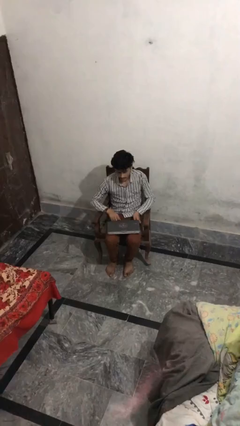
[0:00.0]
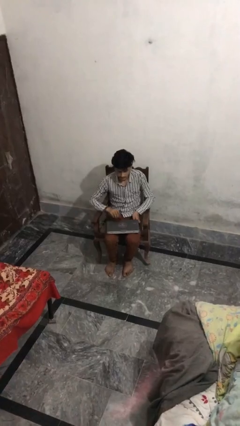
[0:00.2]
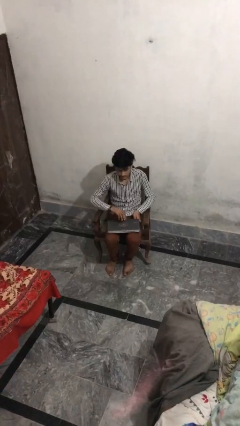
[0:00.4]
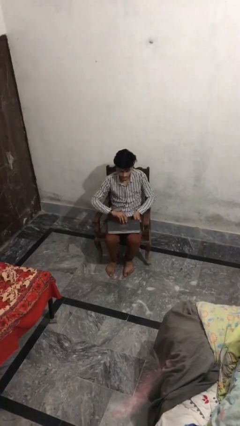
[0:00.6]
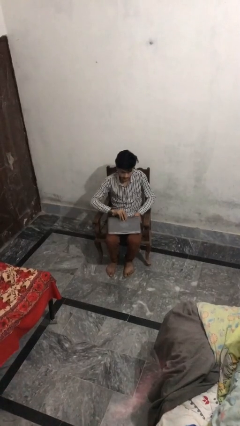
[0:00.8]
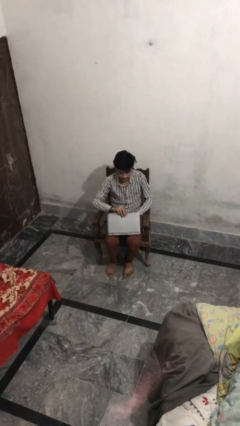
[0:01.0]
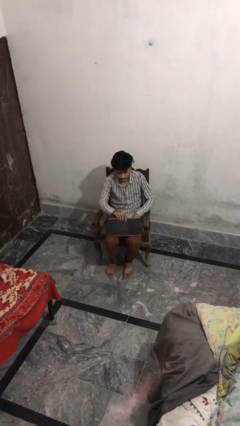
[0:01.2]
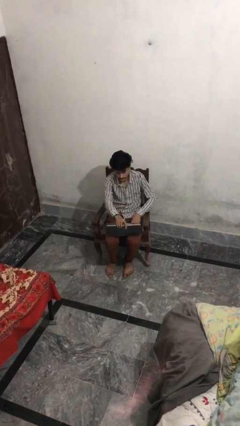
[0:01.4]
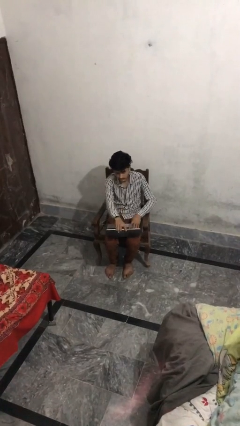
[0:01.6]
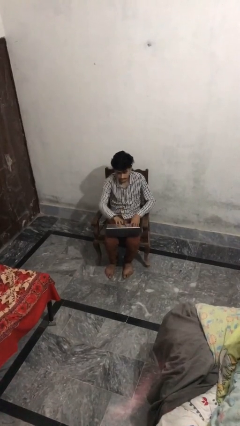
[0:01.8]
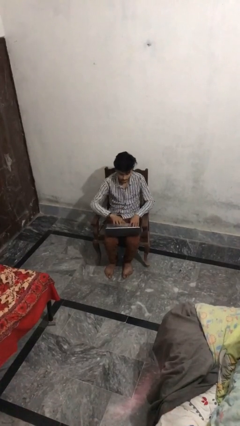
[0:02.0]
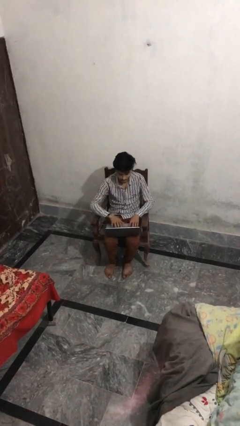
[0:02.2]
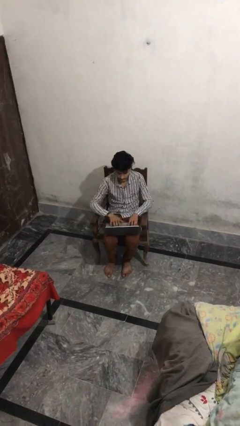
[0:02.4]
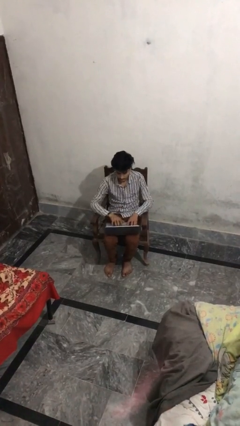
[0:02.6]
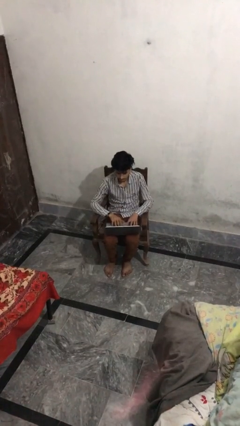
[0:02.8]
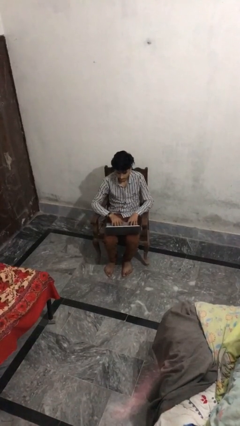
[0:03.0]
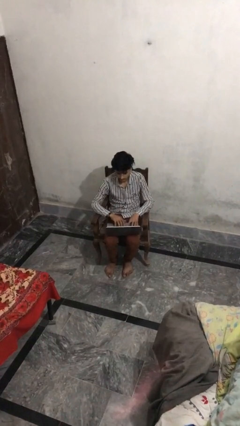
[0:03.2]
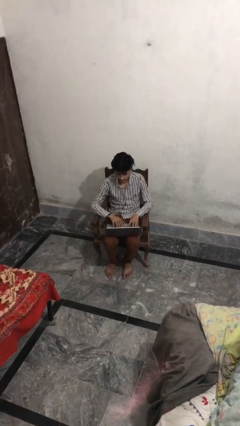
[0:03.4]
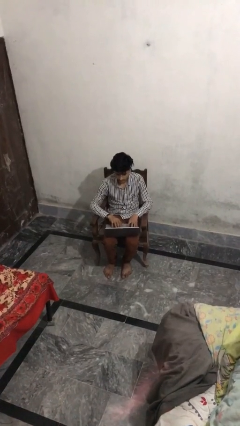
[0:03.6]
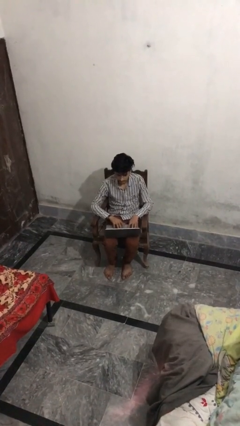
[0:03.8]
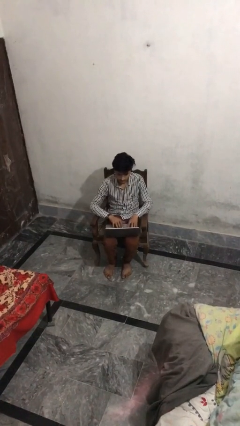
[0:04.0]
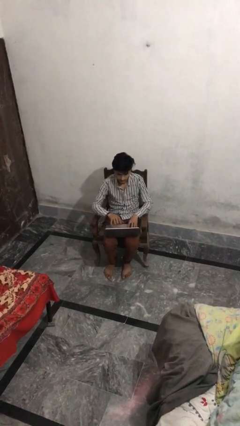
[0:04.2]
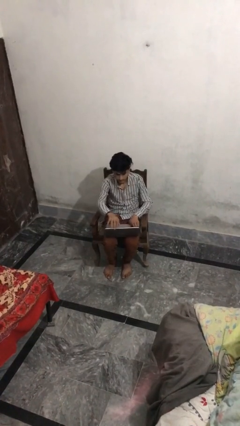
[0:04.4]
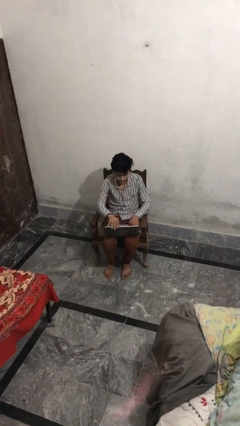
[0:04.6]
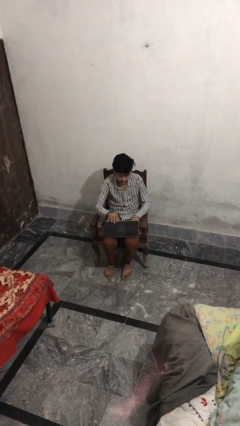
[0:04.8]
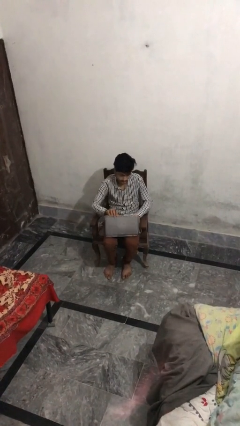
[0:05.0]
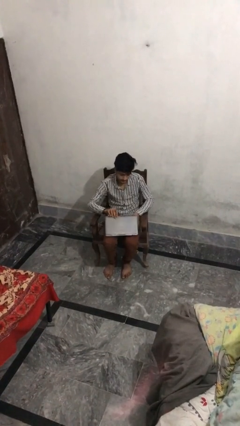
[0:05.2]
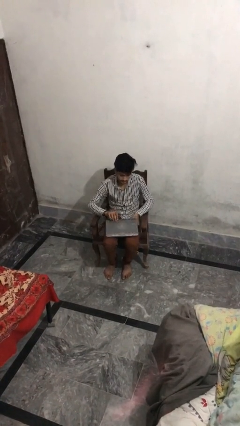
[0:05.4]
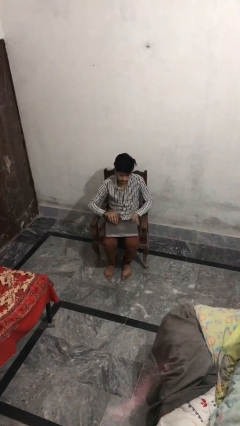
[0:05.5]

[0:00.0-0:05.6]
person interacts with laptop

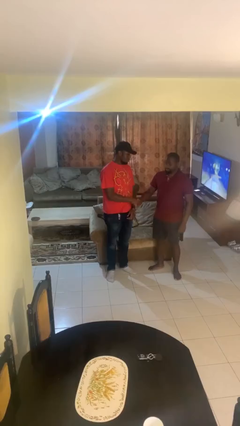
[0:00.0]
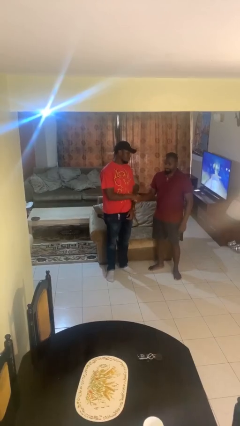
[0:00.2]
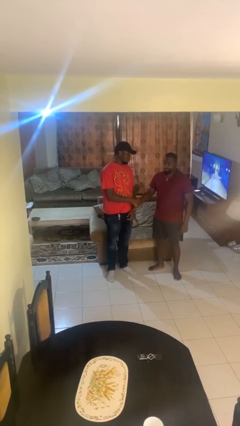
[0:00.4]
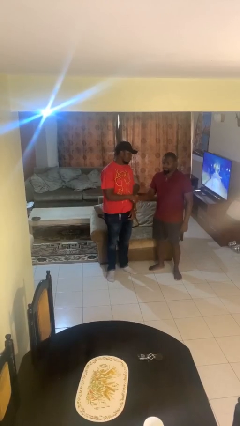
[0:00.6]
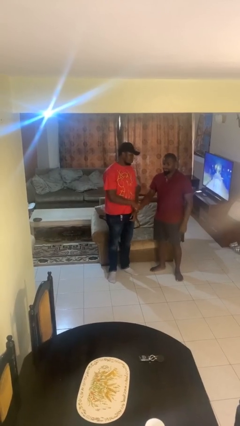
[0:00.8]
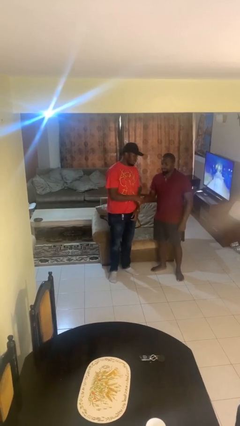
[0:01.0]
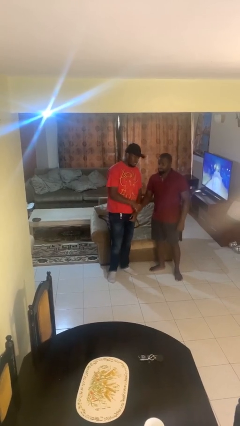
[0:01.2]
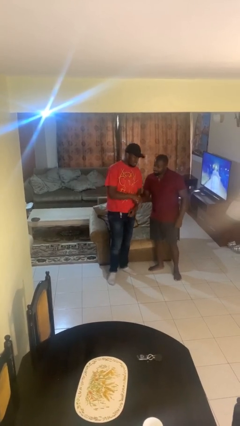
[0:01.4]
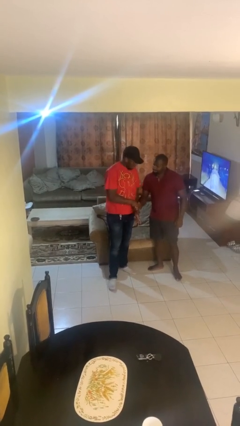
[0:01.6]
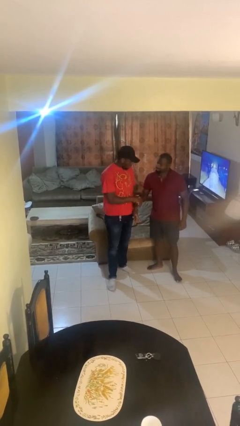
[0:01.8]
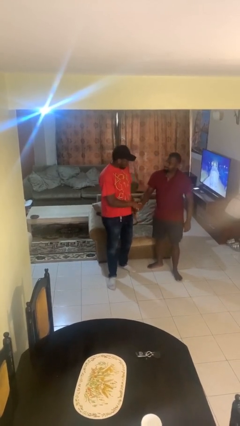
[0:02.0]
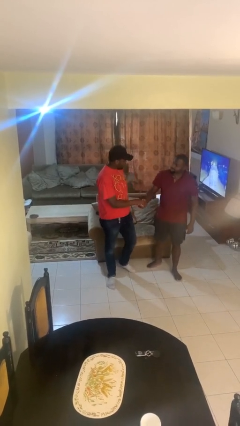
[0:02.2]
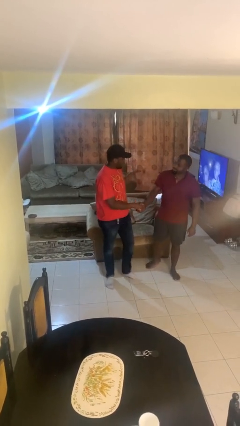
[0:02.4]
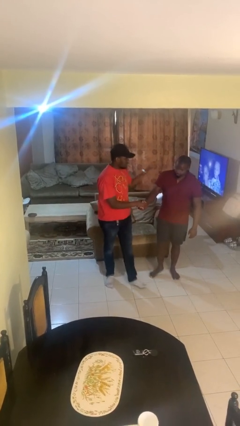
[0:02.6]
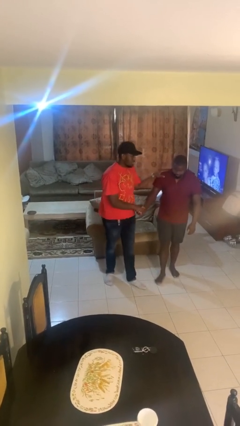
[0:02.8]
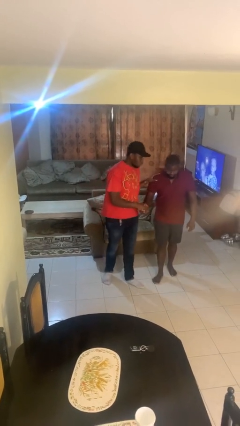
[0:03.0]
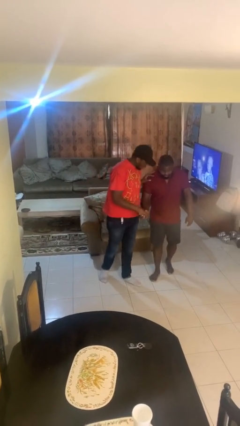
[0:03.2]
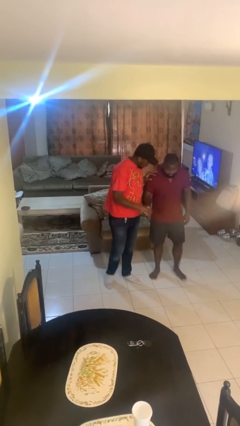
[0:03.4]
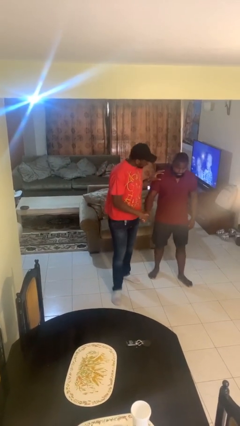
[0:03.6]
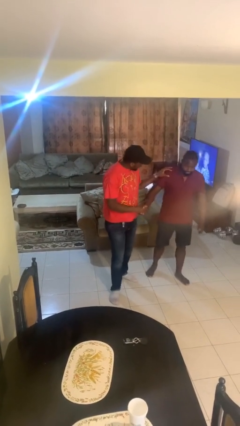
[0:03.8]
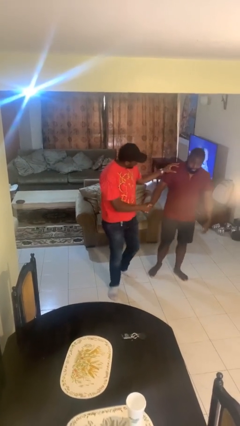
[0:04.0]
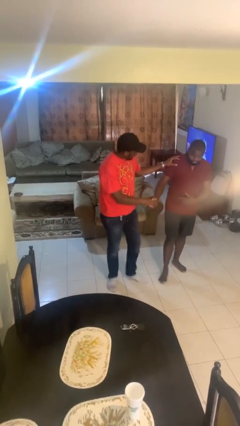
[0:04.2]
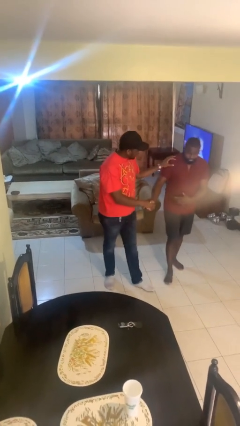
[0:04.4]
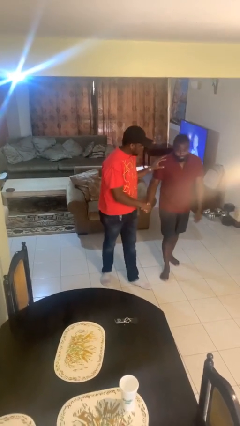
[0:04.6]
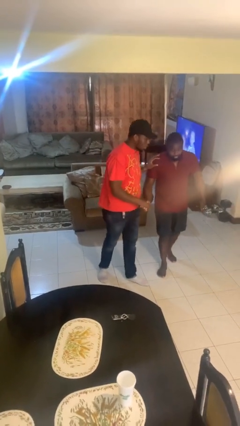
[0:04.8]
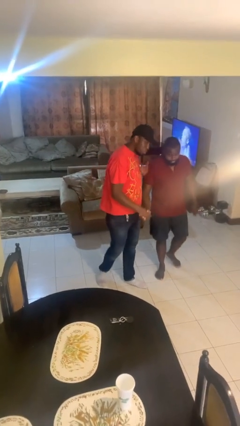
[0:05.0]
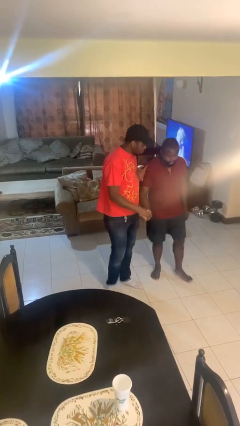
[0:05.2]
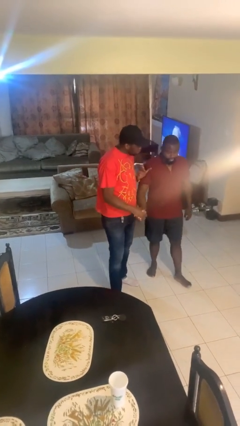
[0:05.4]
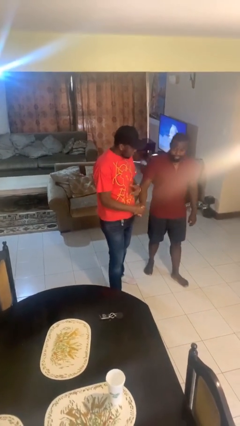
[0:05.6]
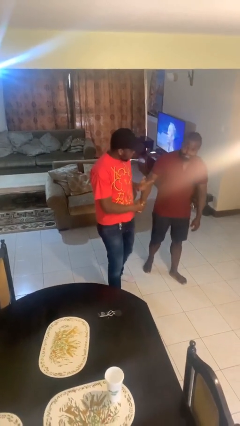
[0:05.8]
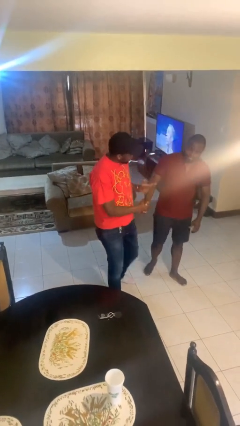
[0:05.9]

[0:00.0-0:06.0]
person holds hand

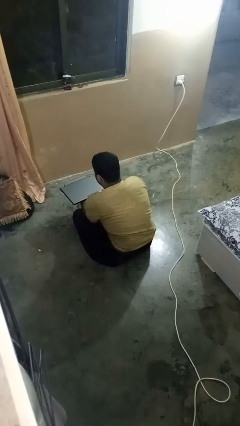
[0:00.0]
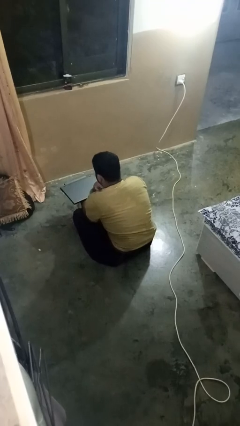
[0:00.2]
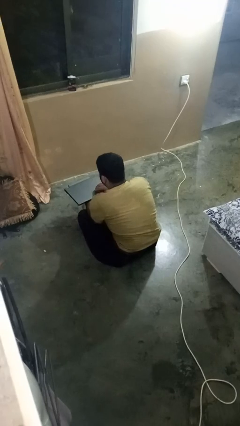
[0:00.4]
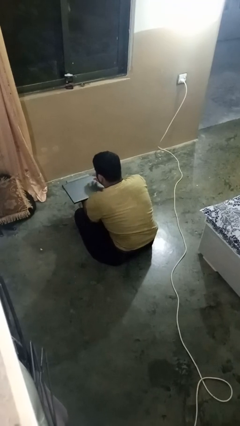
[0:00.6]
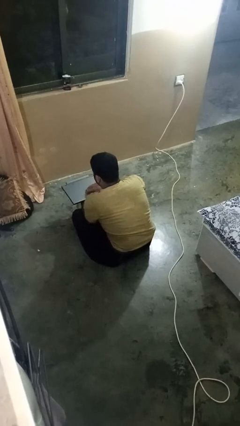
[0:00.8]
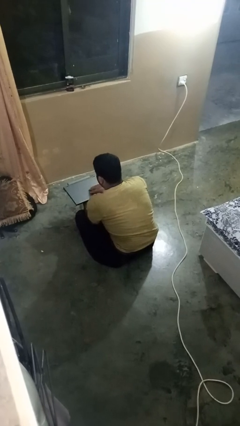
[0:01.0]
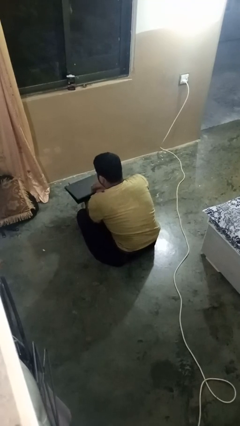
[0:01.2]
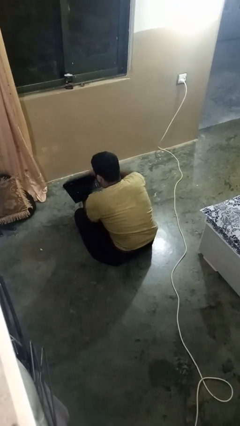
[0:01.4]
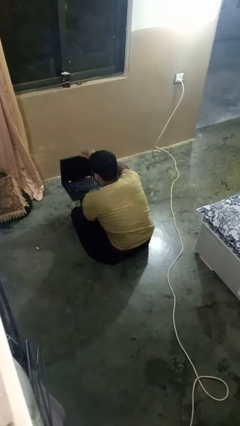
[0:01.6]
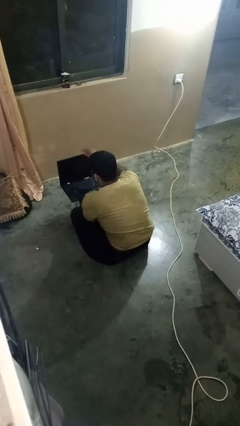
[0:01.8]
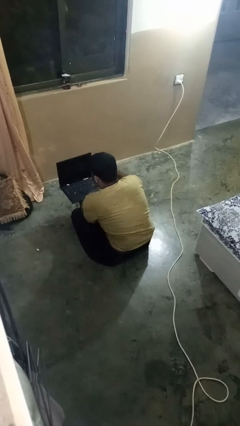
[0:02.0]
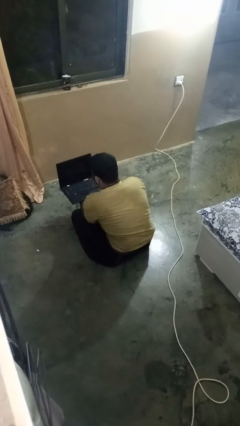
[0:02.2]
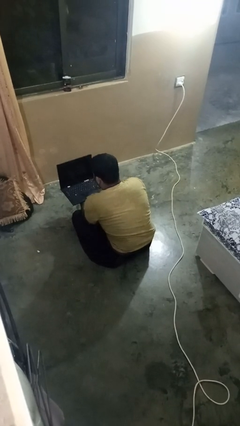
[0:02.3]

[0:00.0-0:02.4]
person opens laptop

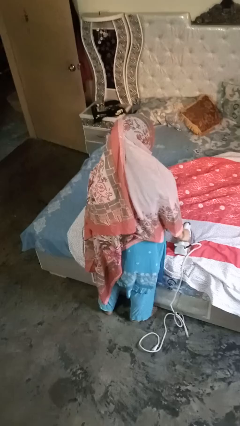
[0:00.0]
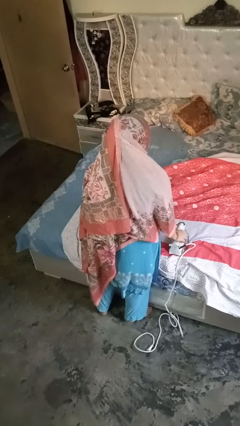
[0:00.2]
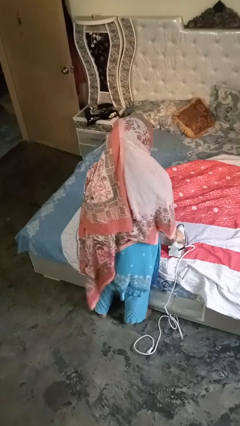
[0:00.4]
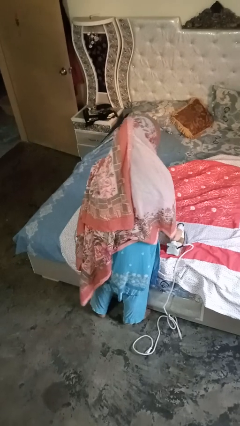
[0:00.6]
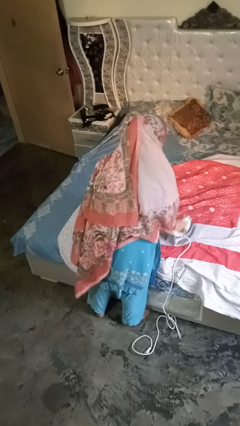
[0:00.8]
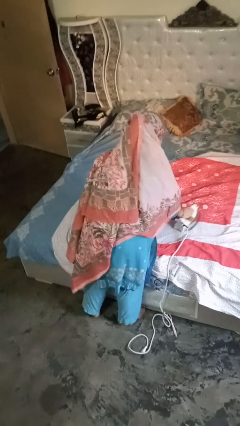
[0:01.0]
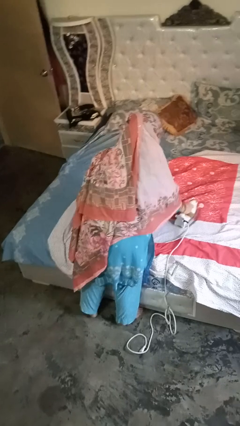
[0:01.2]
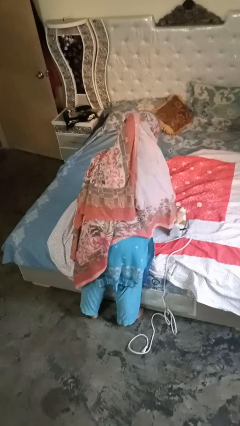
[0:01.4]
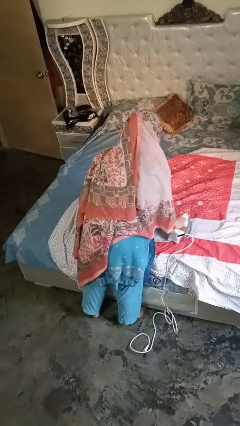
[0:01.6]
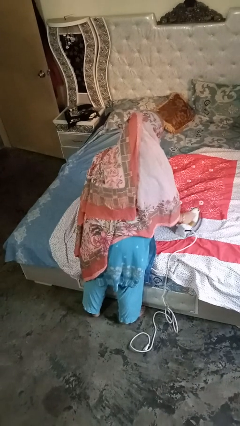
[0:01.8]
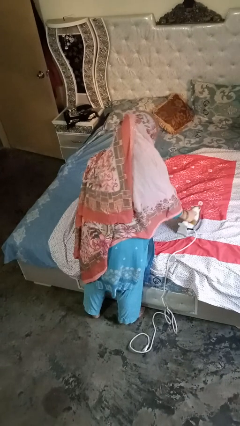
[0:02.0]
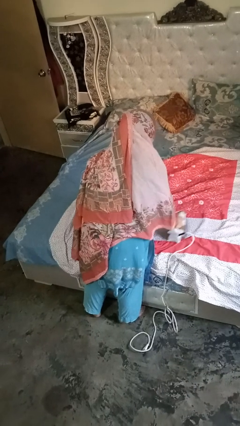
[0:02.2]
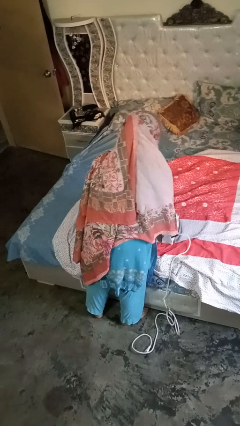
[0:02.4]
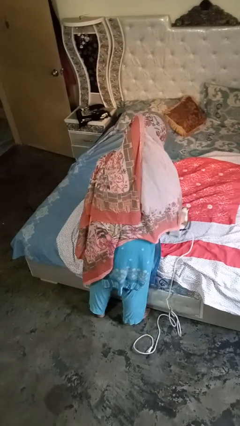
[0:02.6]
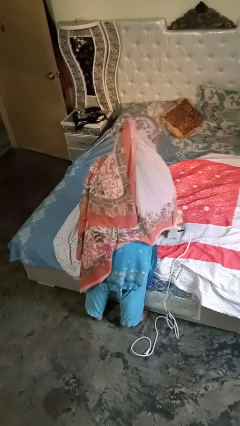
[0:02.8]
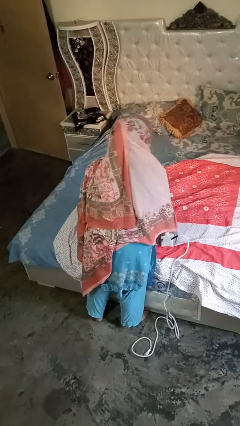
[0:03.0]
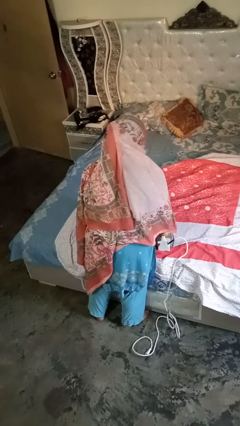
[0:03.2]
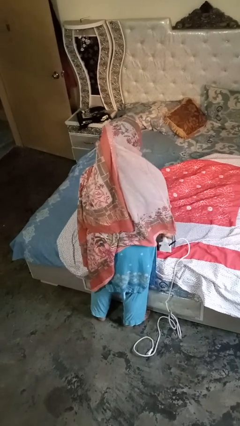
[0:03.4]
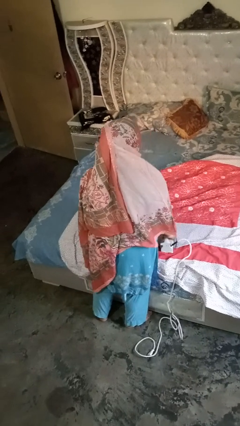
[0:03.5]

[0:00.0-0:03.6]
person irons clothes

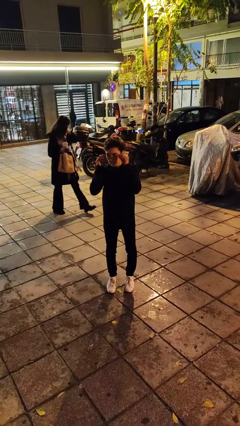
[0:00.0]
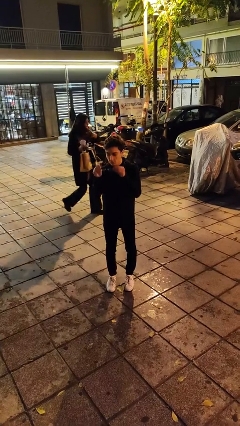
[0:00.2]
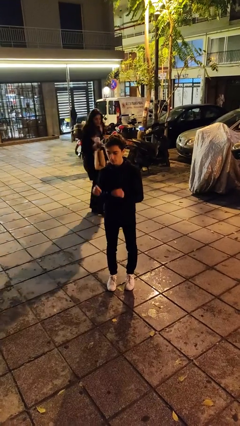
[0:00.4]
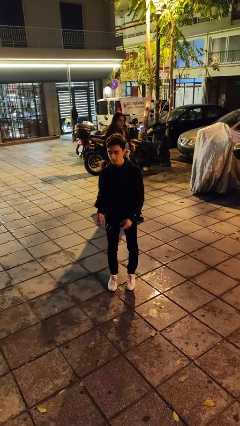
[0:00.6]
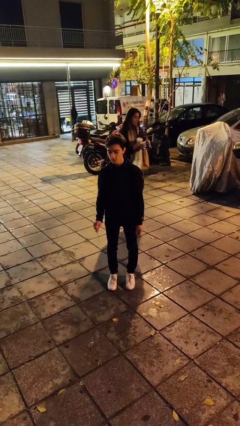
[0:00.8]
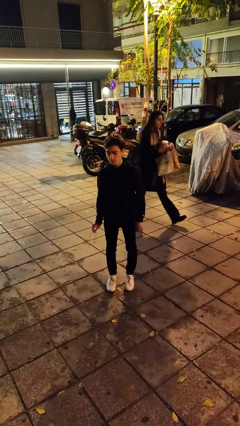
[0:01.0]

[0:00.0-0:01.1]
person takes off glasses
